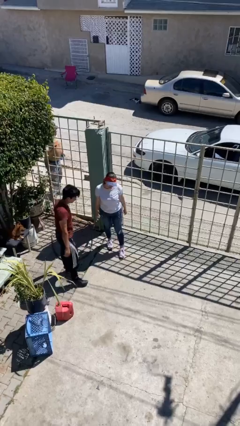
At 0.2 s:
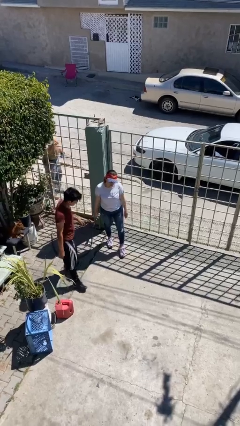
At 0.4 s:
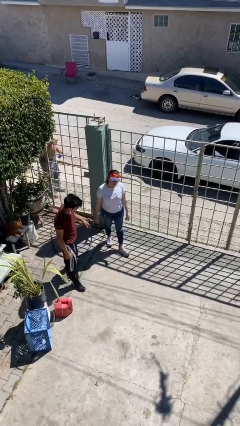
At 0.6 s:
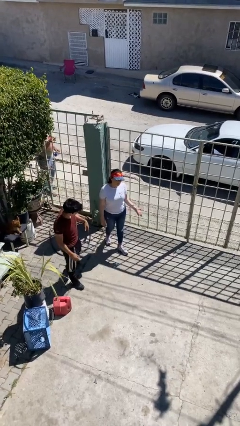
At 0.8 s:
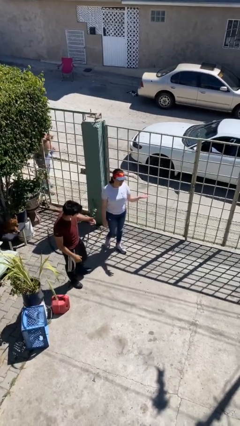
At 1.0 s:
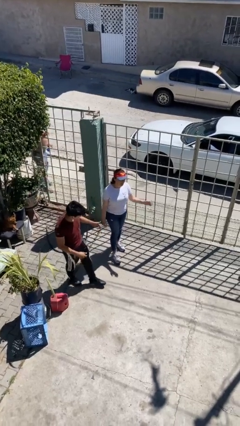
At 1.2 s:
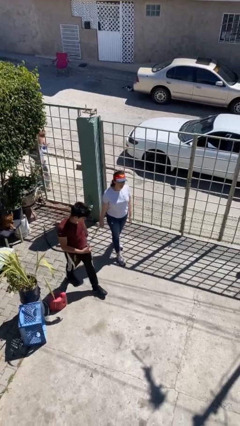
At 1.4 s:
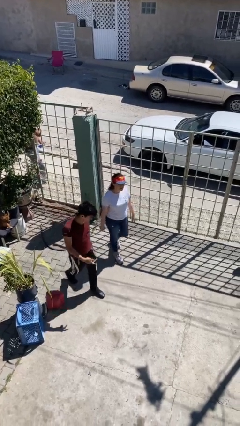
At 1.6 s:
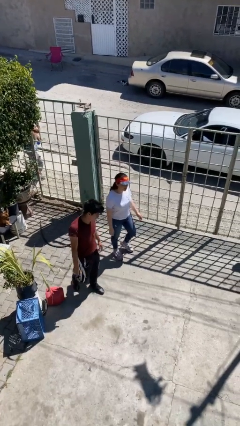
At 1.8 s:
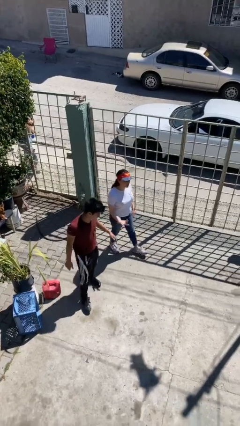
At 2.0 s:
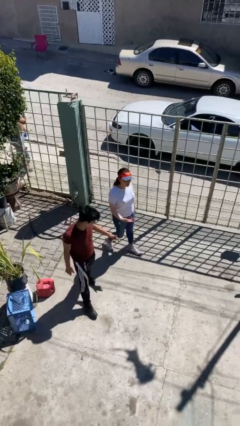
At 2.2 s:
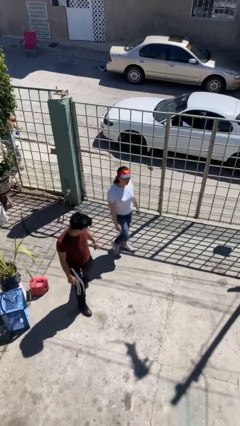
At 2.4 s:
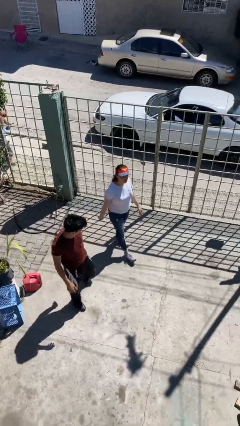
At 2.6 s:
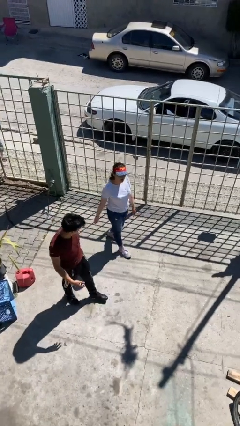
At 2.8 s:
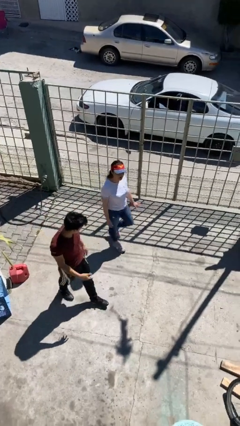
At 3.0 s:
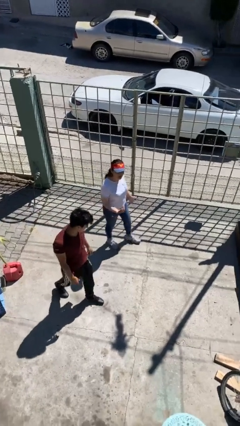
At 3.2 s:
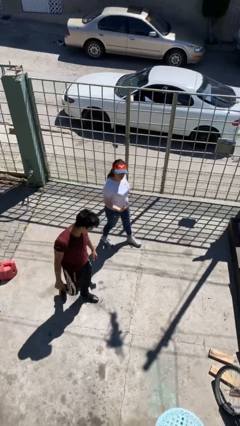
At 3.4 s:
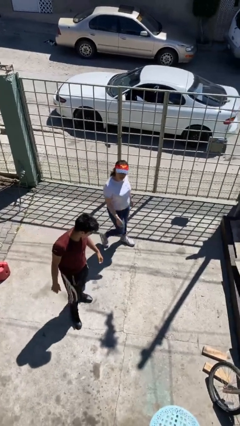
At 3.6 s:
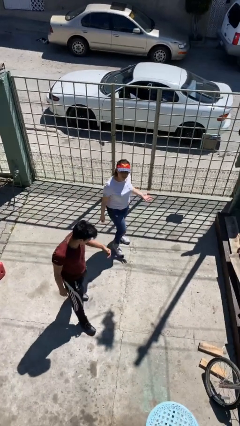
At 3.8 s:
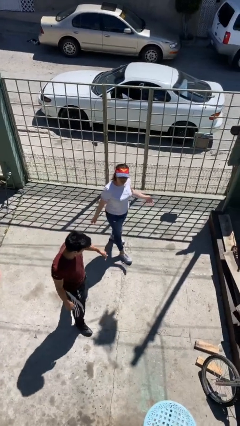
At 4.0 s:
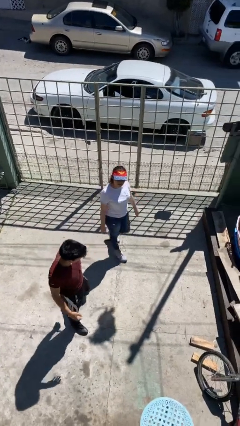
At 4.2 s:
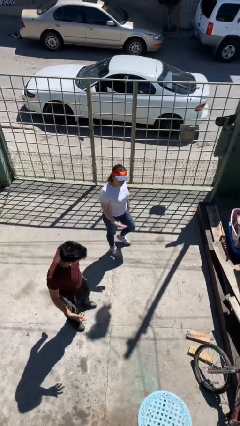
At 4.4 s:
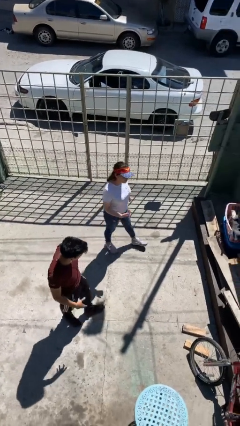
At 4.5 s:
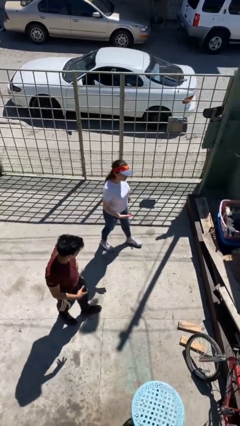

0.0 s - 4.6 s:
person talks to person

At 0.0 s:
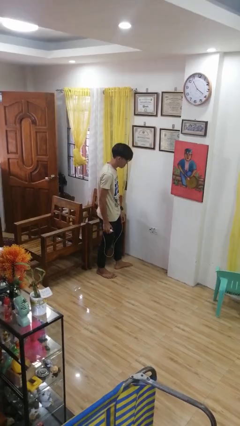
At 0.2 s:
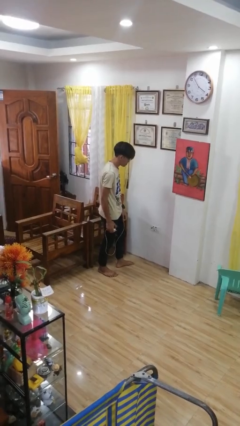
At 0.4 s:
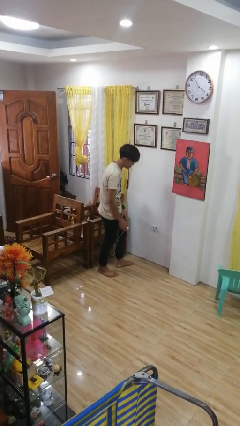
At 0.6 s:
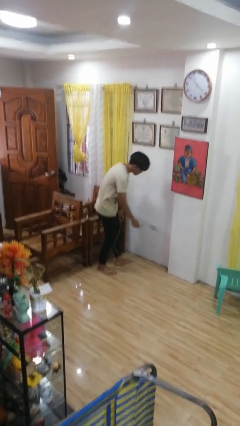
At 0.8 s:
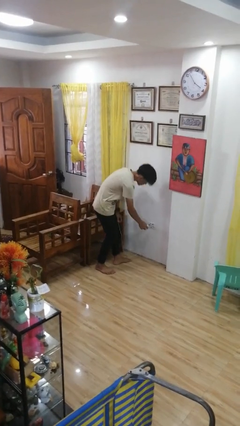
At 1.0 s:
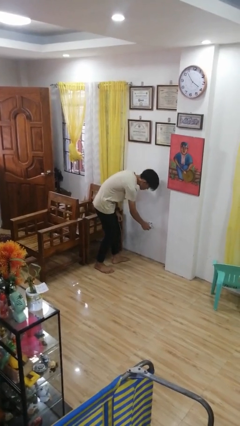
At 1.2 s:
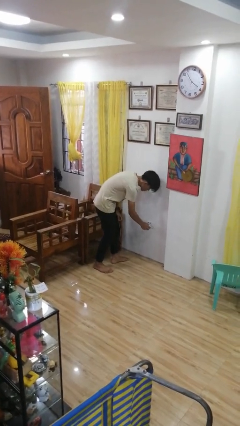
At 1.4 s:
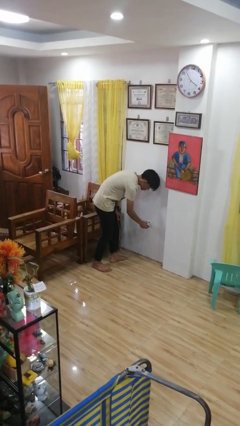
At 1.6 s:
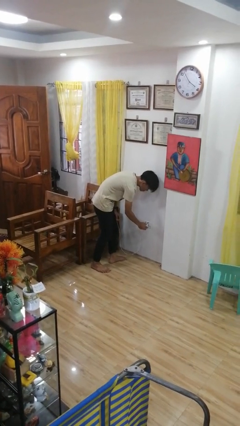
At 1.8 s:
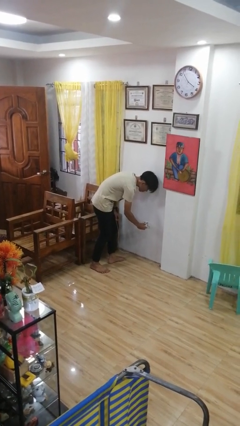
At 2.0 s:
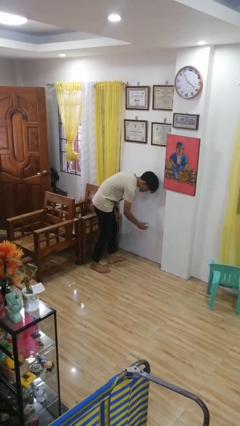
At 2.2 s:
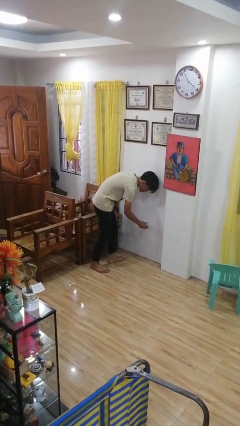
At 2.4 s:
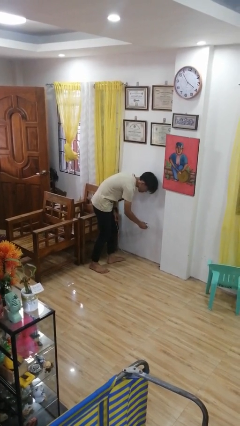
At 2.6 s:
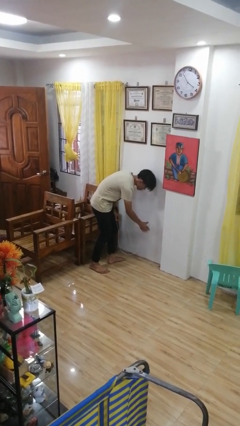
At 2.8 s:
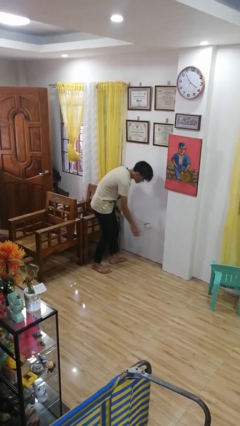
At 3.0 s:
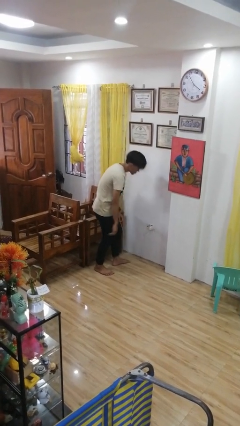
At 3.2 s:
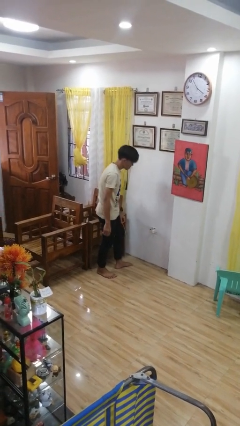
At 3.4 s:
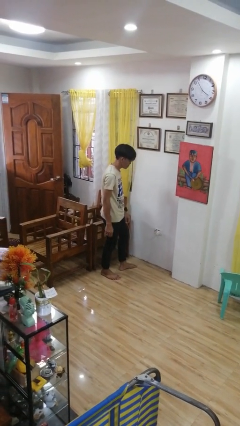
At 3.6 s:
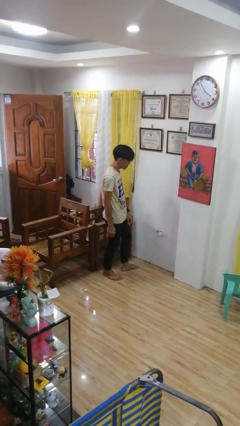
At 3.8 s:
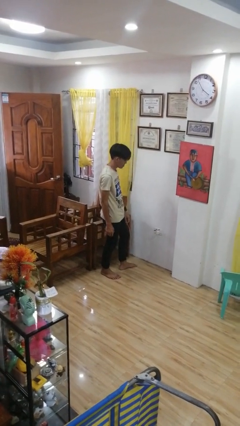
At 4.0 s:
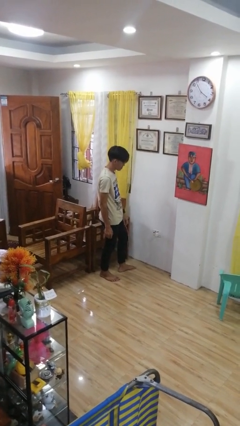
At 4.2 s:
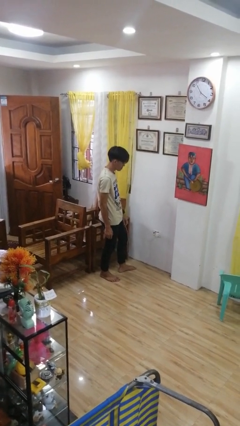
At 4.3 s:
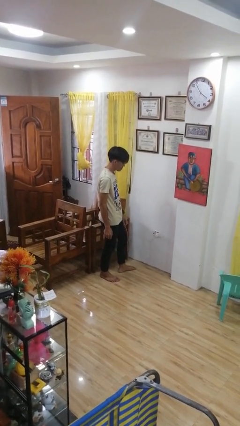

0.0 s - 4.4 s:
person plugs into electrical socket

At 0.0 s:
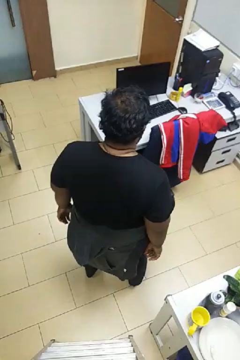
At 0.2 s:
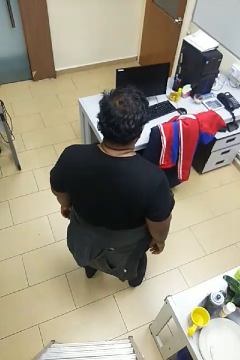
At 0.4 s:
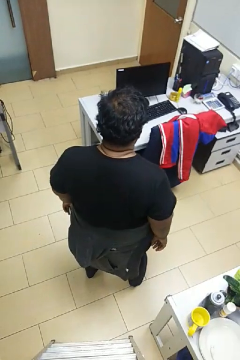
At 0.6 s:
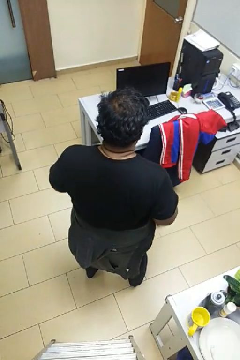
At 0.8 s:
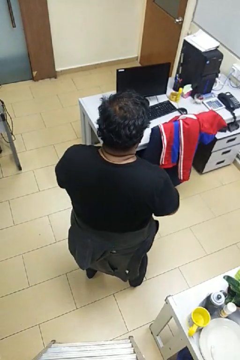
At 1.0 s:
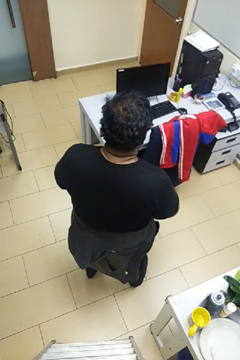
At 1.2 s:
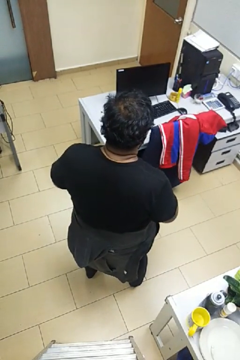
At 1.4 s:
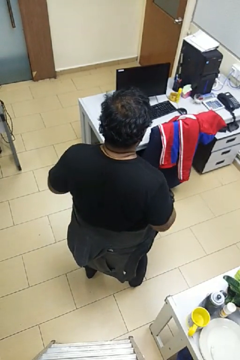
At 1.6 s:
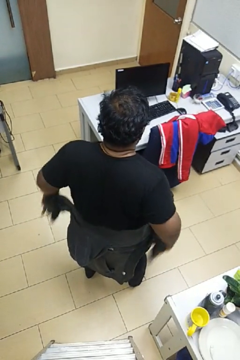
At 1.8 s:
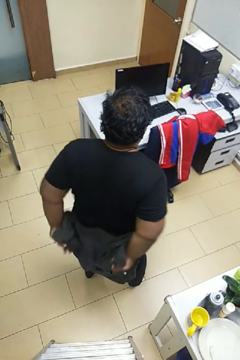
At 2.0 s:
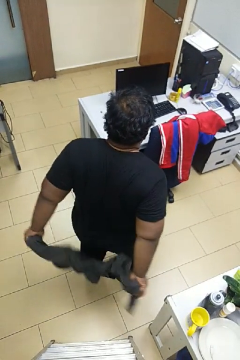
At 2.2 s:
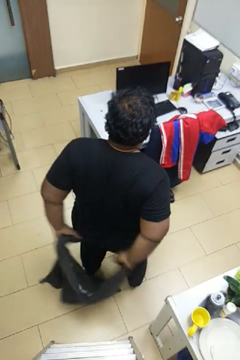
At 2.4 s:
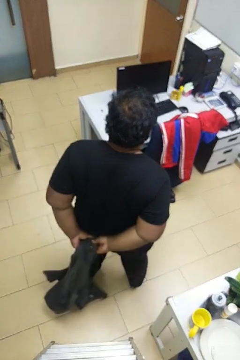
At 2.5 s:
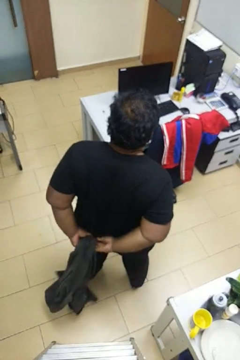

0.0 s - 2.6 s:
person unties jacket around waist

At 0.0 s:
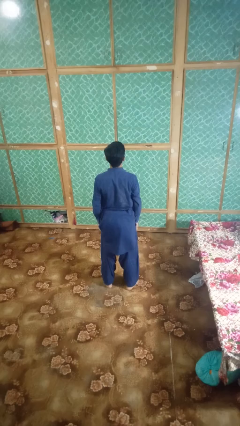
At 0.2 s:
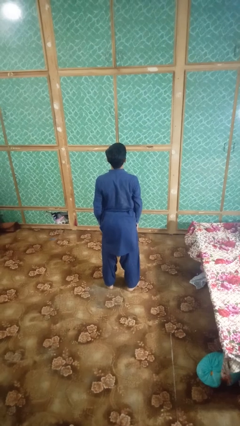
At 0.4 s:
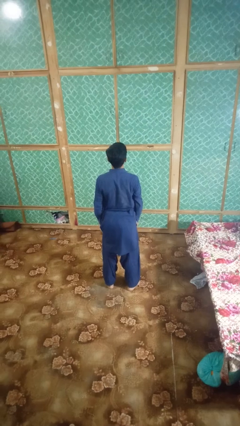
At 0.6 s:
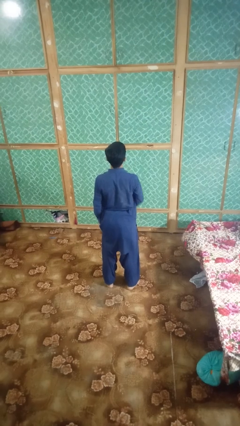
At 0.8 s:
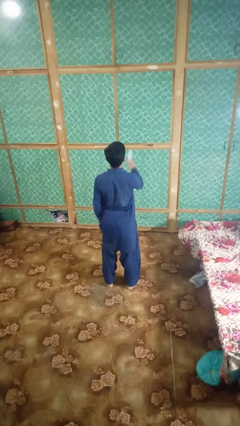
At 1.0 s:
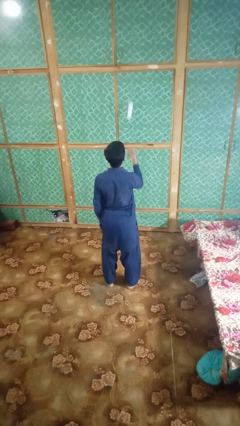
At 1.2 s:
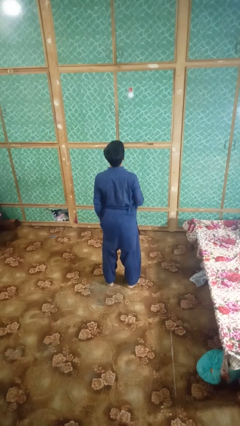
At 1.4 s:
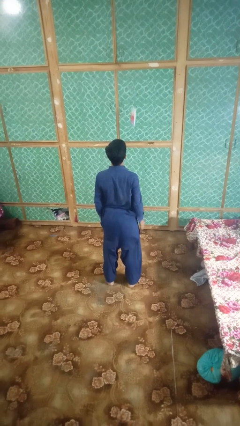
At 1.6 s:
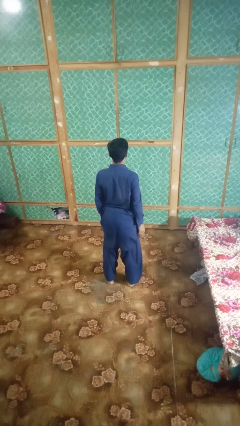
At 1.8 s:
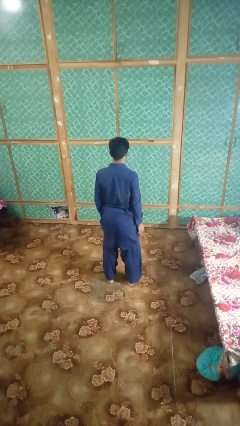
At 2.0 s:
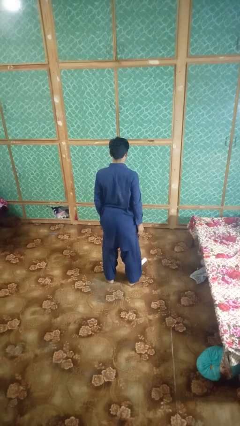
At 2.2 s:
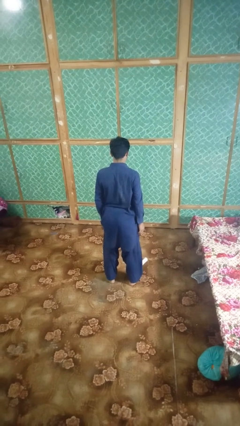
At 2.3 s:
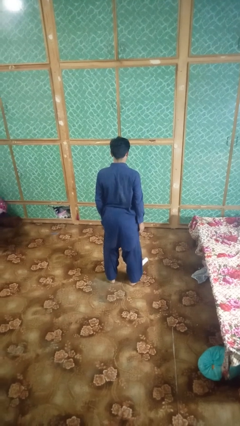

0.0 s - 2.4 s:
person throws object into air

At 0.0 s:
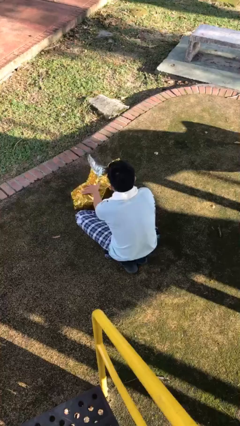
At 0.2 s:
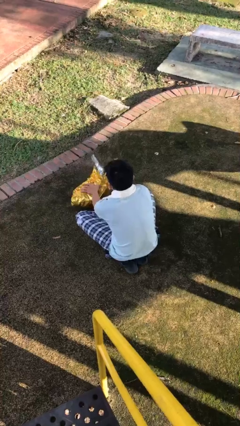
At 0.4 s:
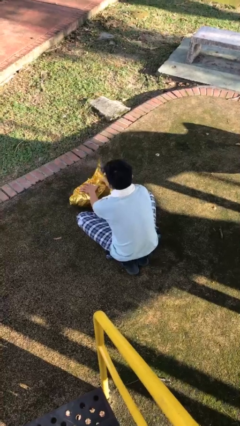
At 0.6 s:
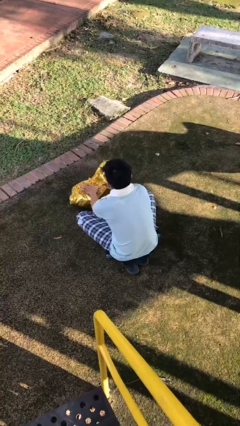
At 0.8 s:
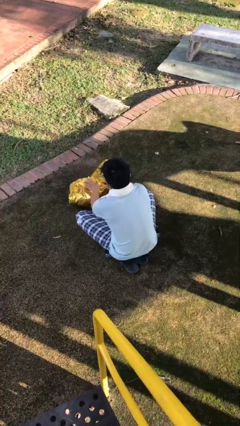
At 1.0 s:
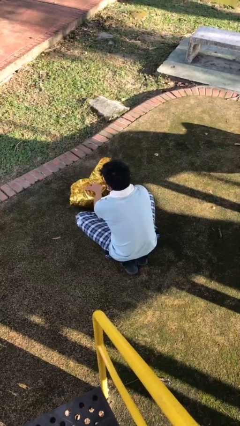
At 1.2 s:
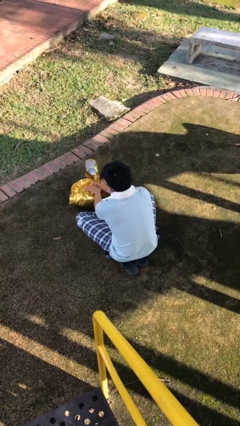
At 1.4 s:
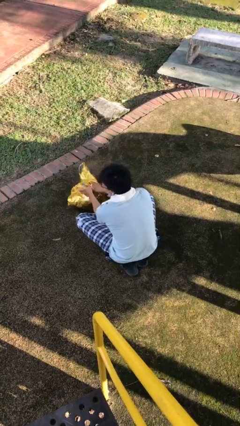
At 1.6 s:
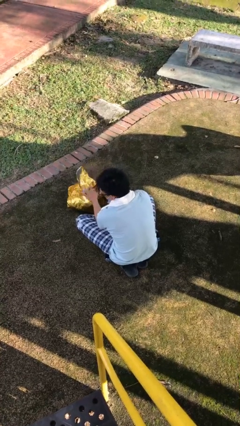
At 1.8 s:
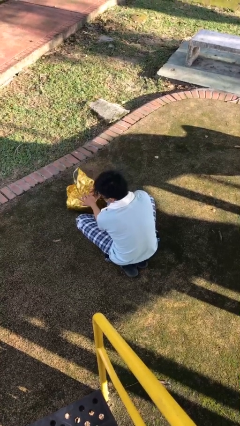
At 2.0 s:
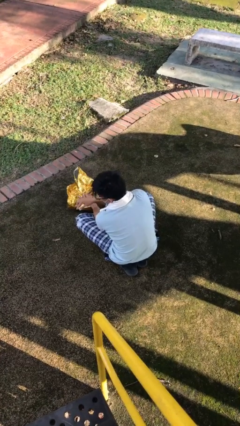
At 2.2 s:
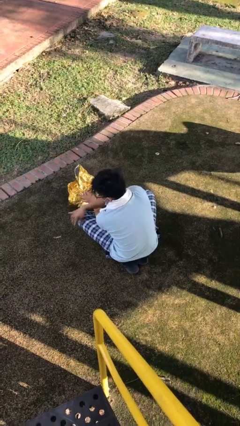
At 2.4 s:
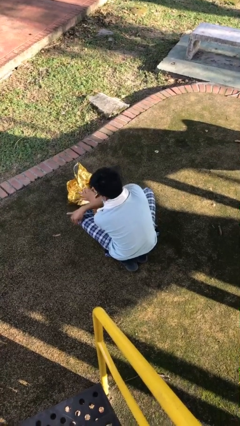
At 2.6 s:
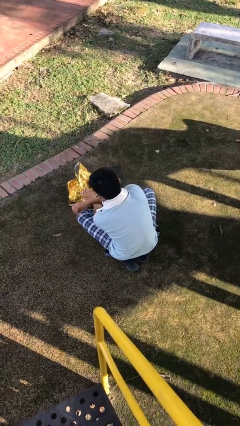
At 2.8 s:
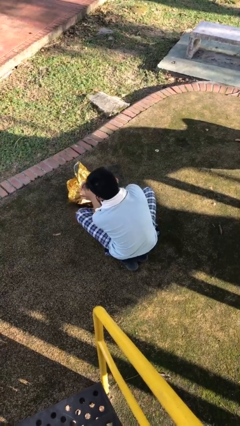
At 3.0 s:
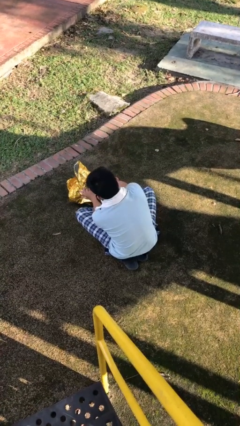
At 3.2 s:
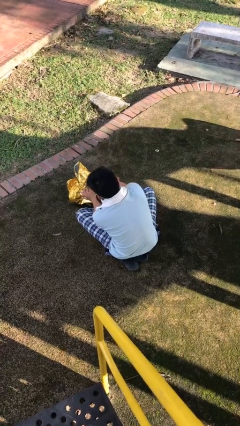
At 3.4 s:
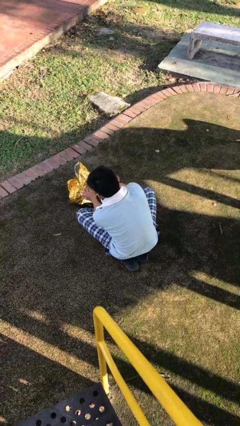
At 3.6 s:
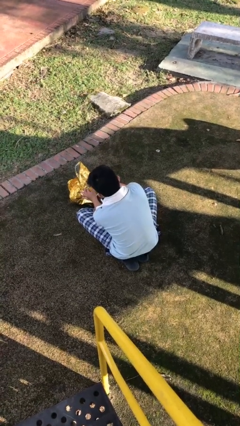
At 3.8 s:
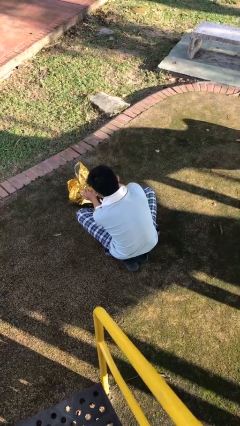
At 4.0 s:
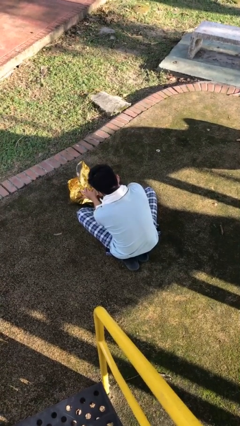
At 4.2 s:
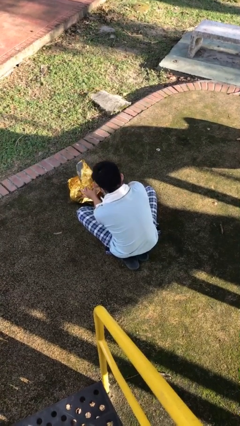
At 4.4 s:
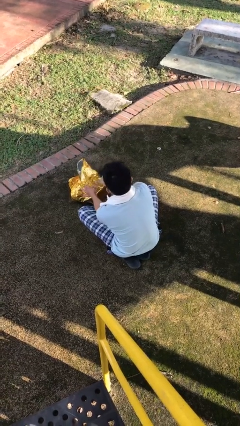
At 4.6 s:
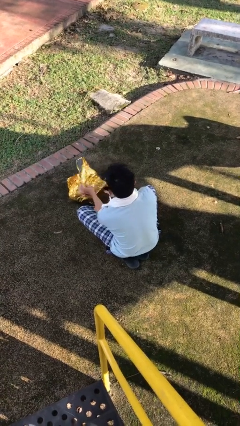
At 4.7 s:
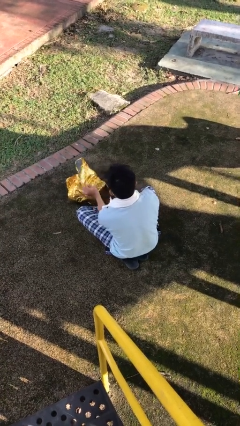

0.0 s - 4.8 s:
person wraps box
